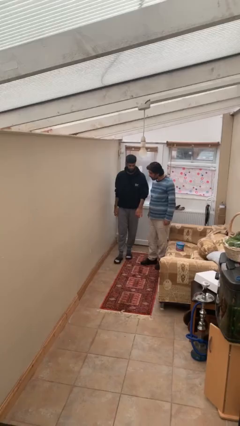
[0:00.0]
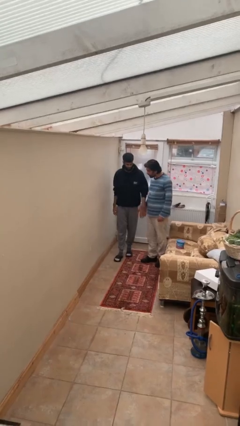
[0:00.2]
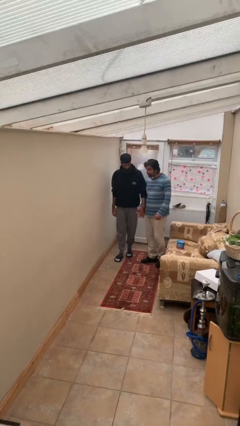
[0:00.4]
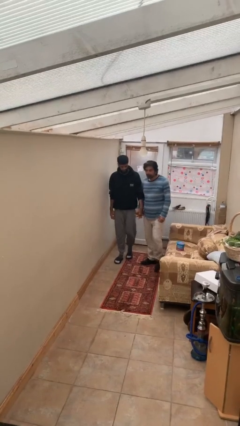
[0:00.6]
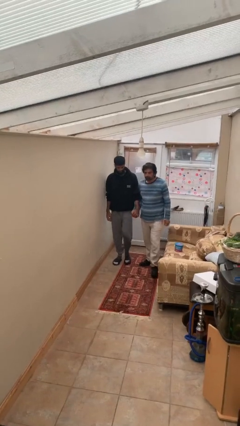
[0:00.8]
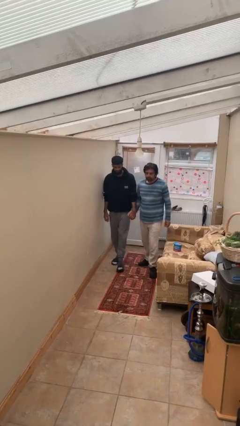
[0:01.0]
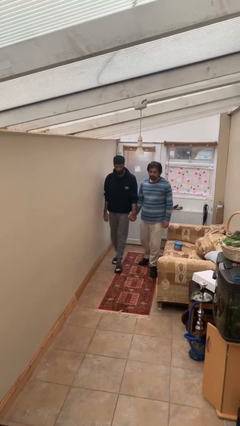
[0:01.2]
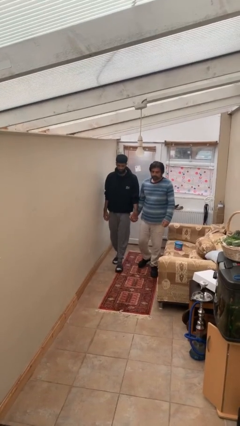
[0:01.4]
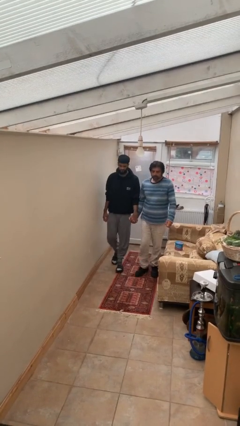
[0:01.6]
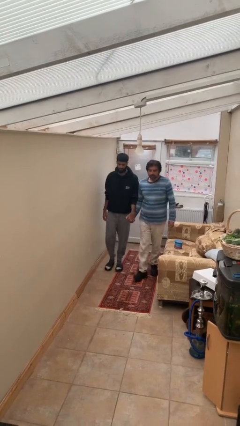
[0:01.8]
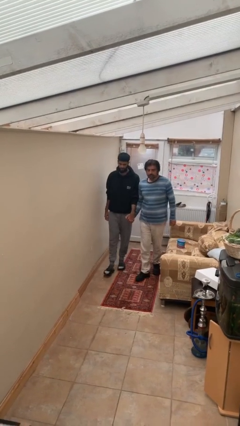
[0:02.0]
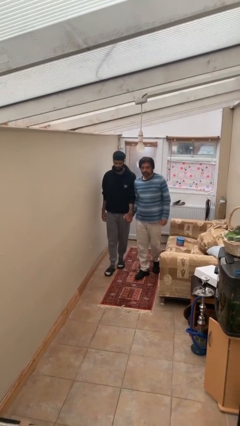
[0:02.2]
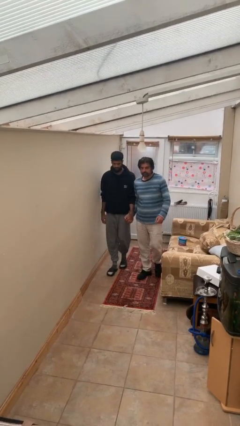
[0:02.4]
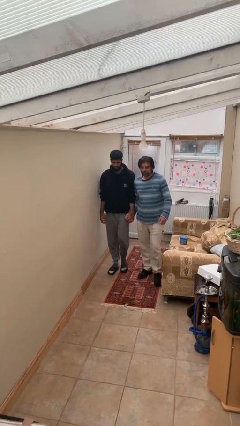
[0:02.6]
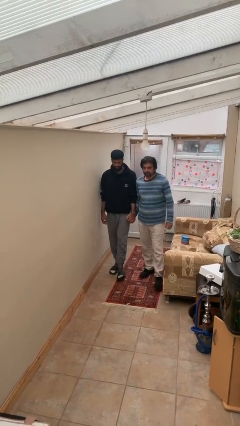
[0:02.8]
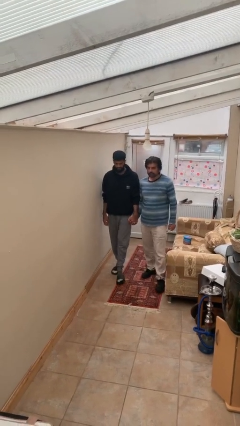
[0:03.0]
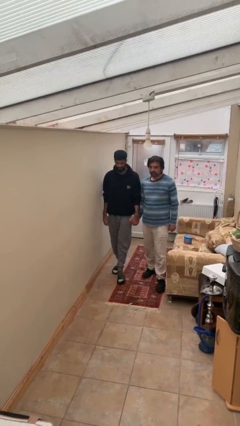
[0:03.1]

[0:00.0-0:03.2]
person holds hand

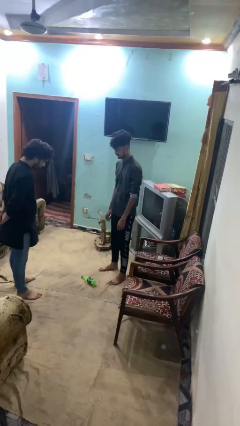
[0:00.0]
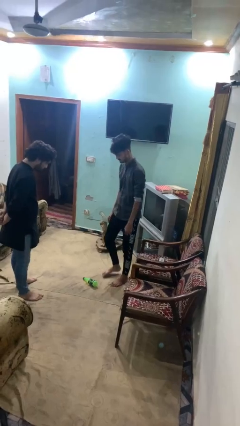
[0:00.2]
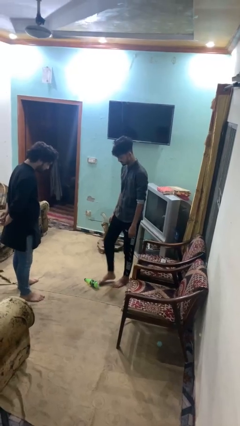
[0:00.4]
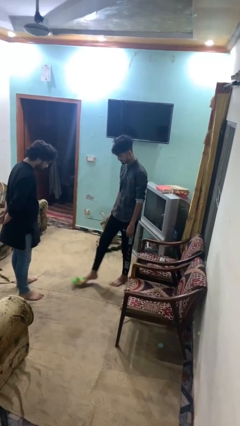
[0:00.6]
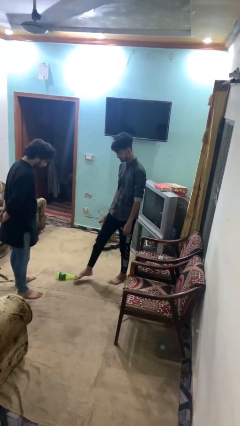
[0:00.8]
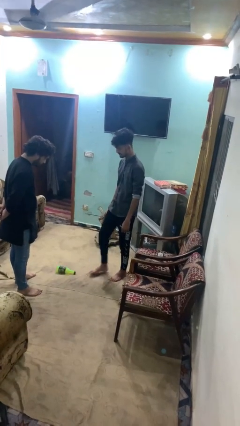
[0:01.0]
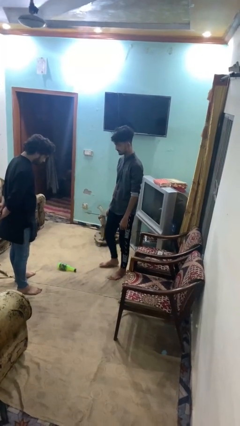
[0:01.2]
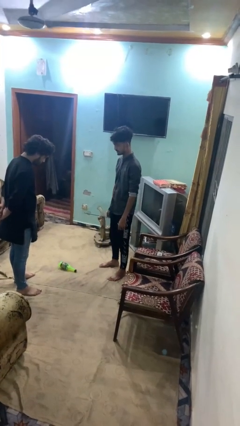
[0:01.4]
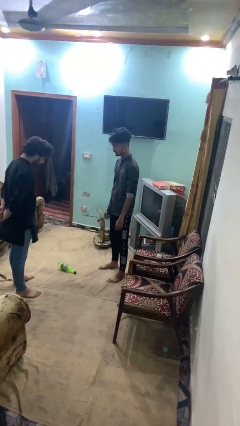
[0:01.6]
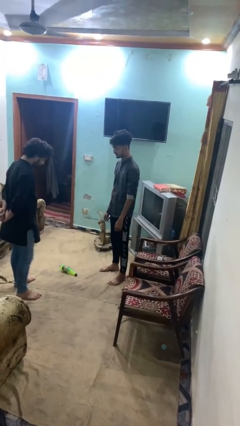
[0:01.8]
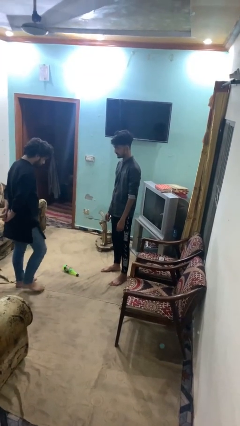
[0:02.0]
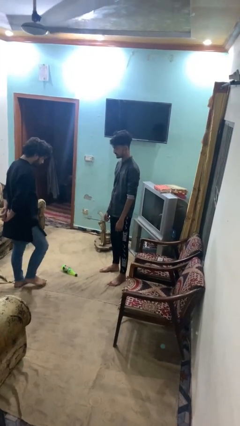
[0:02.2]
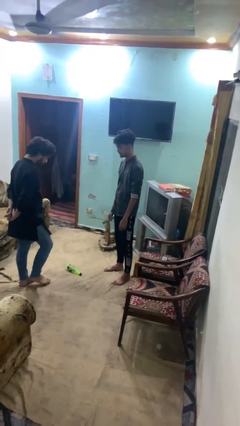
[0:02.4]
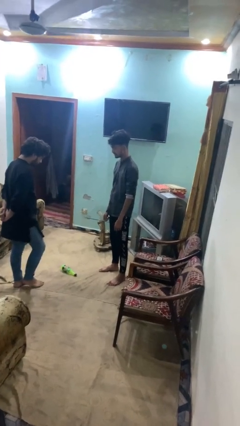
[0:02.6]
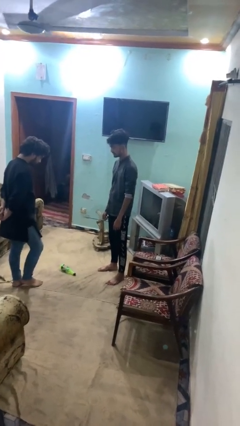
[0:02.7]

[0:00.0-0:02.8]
person kicks object to person

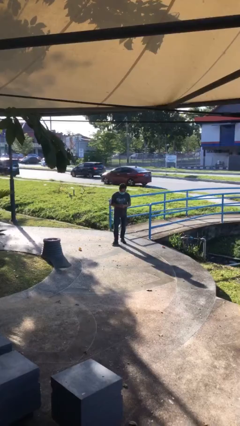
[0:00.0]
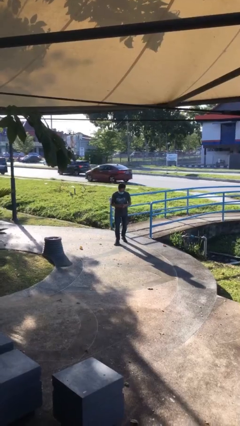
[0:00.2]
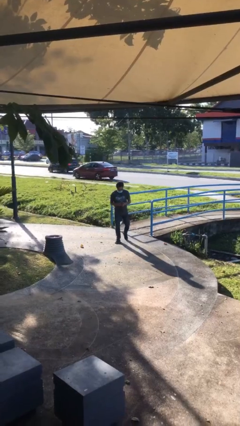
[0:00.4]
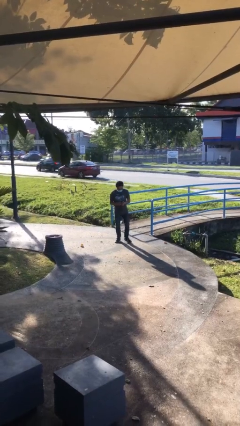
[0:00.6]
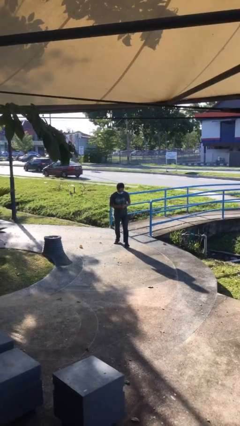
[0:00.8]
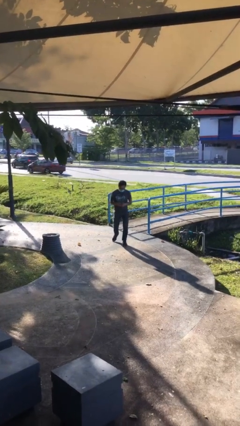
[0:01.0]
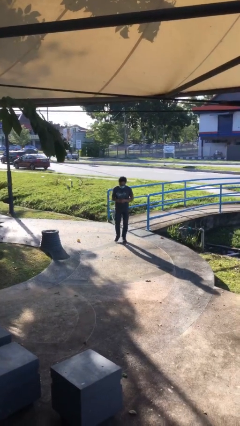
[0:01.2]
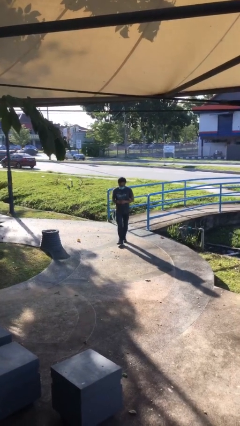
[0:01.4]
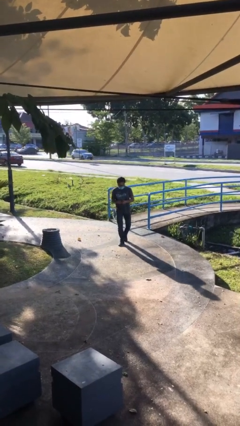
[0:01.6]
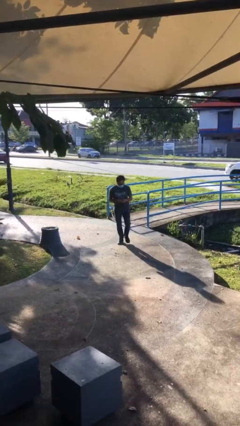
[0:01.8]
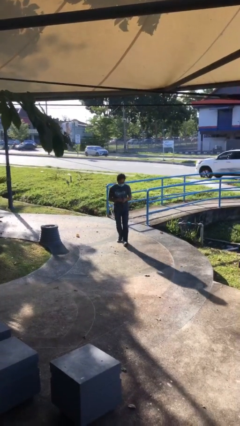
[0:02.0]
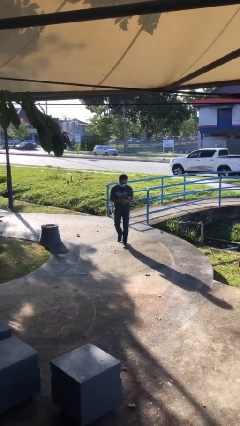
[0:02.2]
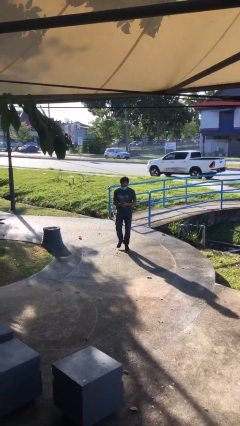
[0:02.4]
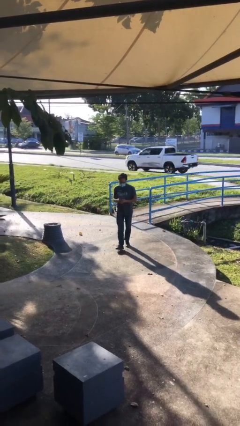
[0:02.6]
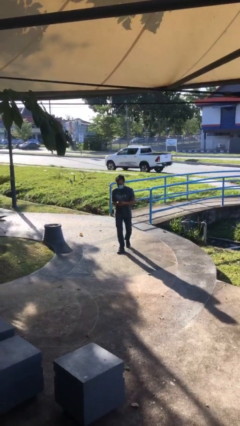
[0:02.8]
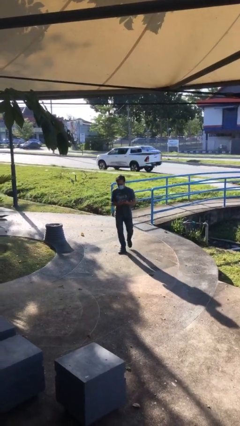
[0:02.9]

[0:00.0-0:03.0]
person texts on phone

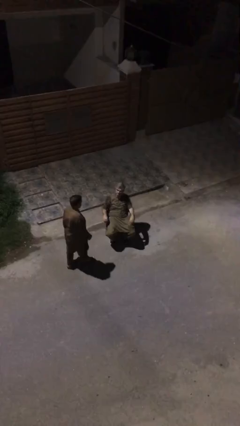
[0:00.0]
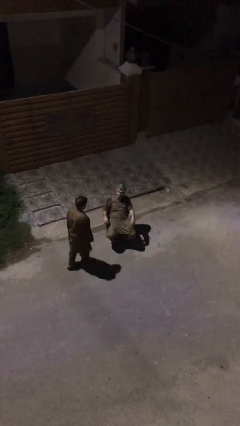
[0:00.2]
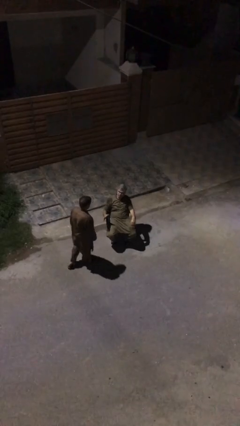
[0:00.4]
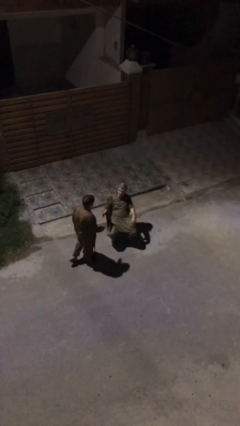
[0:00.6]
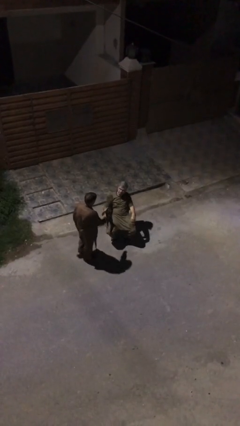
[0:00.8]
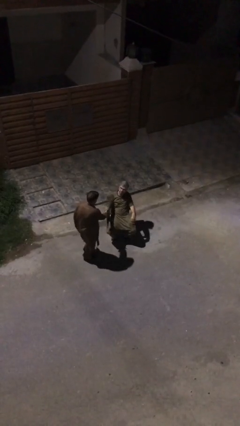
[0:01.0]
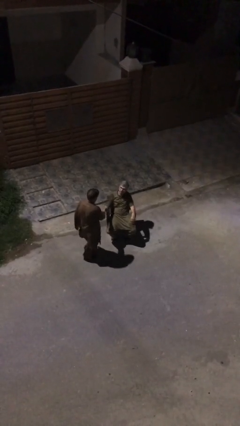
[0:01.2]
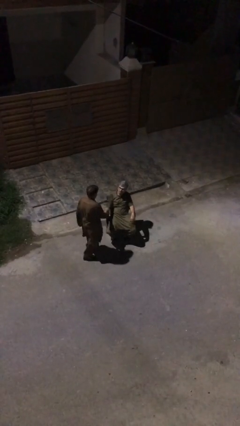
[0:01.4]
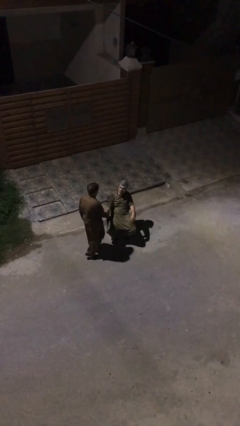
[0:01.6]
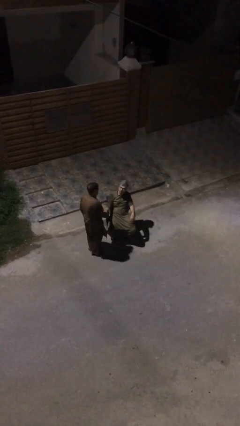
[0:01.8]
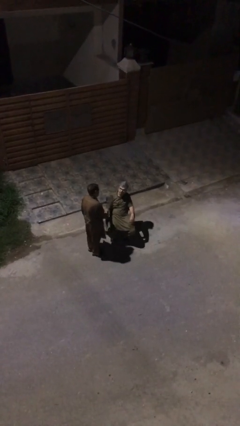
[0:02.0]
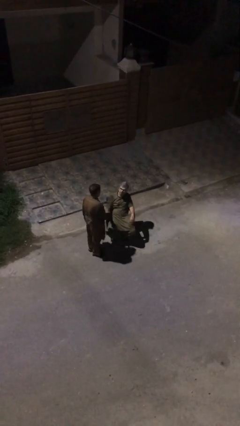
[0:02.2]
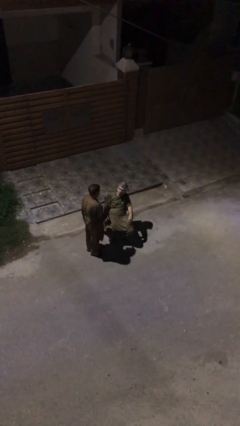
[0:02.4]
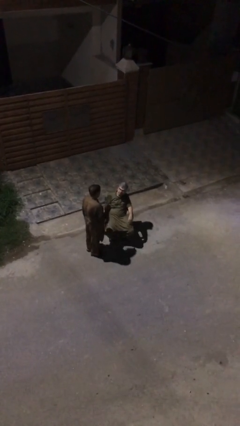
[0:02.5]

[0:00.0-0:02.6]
person shakes hand

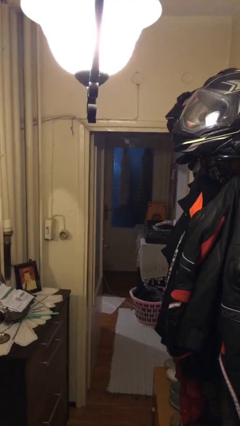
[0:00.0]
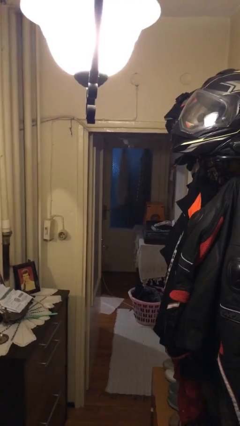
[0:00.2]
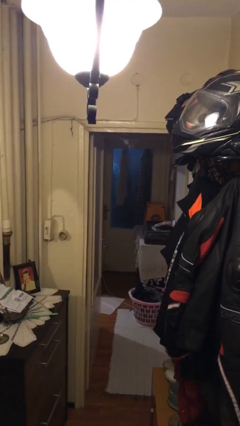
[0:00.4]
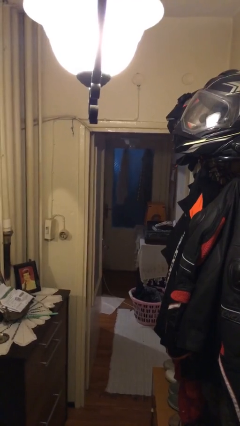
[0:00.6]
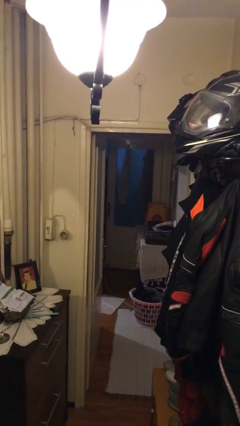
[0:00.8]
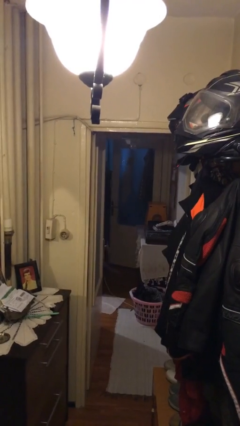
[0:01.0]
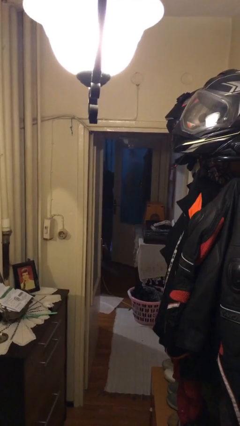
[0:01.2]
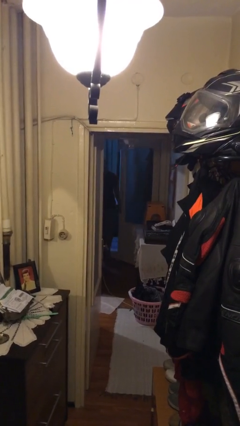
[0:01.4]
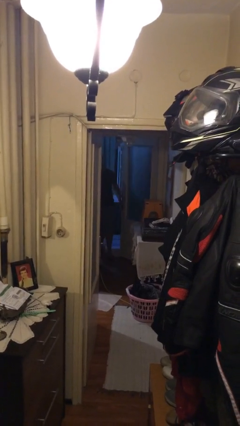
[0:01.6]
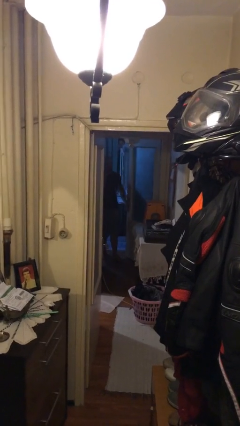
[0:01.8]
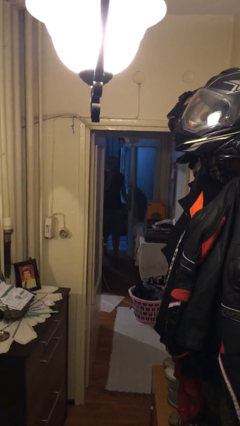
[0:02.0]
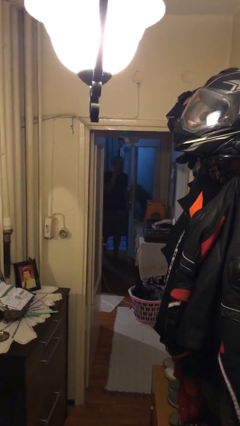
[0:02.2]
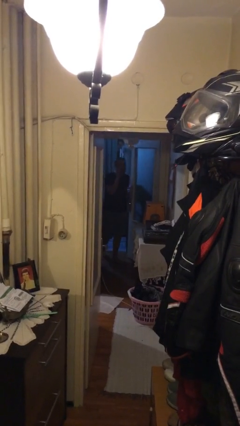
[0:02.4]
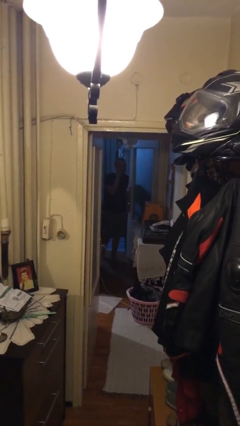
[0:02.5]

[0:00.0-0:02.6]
person opens facility door

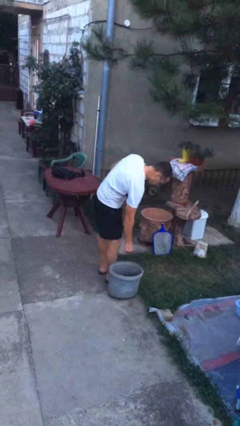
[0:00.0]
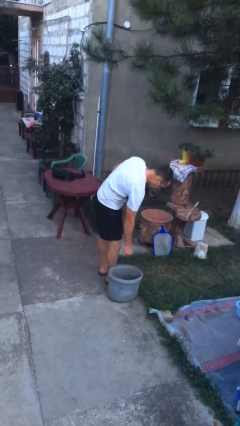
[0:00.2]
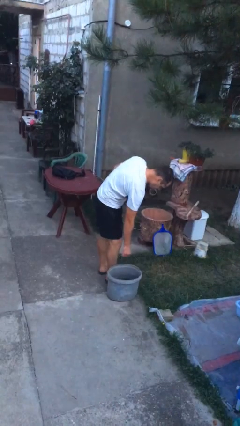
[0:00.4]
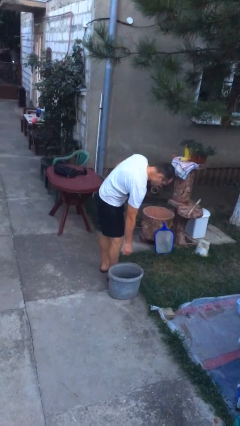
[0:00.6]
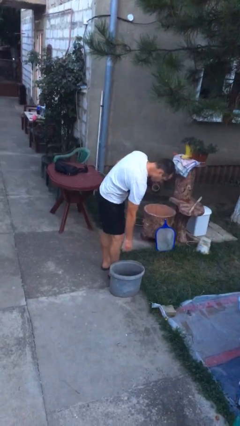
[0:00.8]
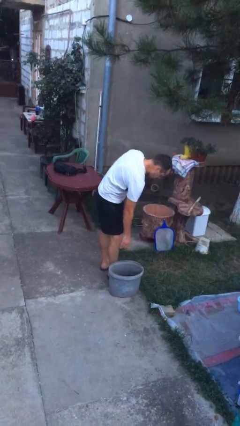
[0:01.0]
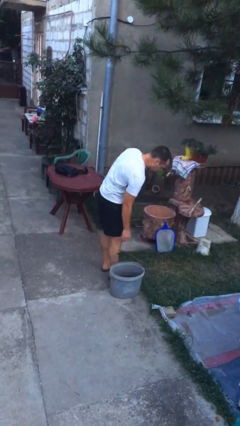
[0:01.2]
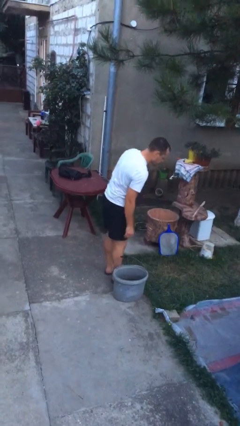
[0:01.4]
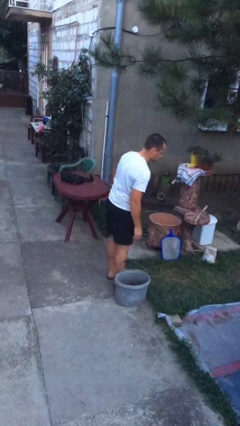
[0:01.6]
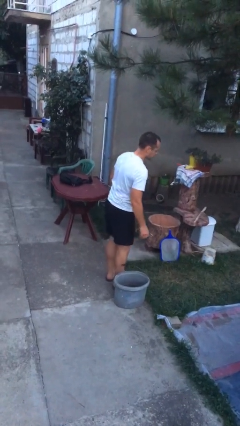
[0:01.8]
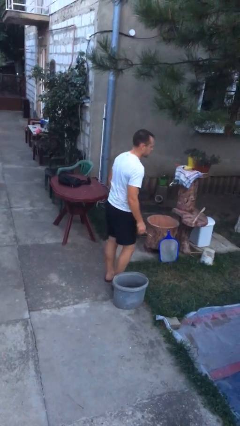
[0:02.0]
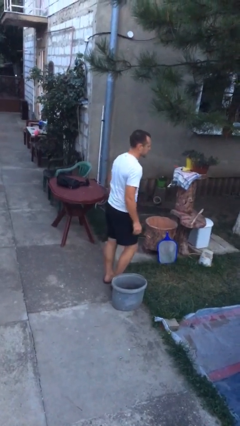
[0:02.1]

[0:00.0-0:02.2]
person puts down object on floor

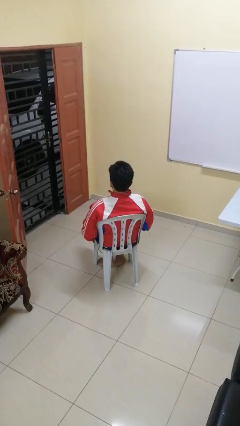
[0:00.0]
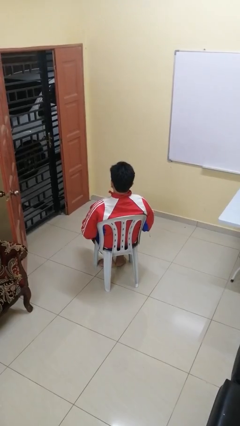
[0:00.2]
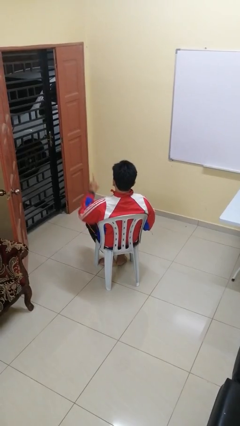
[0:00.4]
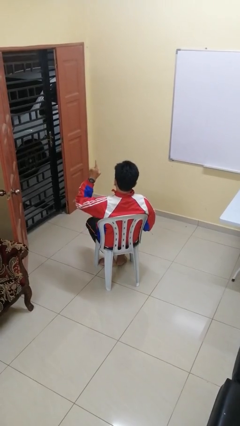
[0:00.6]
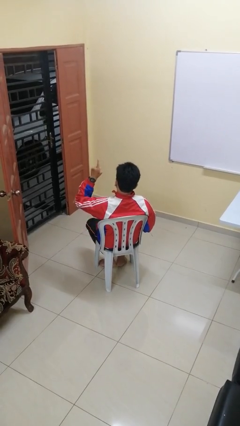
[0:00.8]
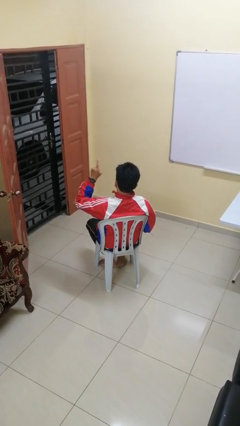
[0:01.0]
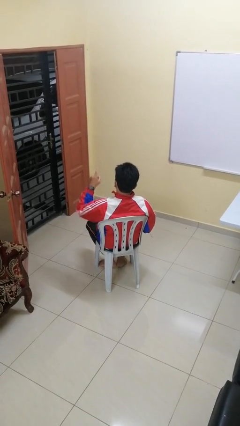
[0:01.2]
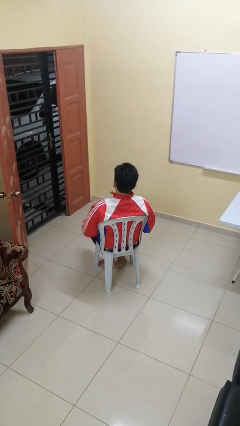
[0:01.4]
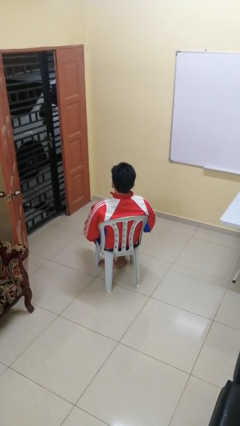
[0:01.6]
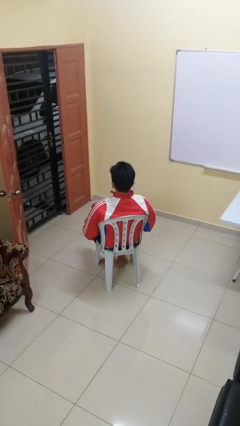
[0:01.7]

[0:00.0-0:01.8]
person gestures number one
